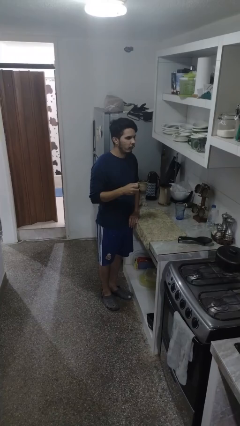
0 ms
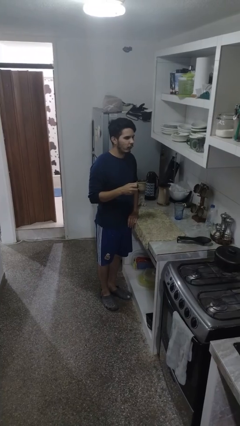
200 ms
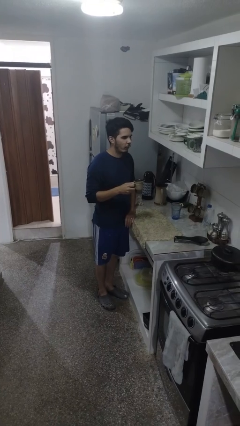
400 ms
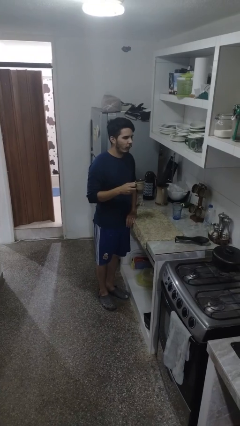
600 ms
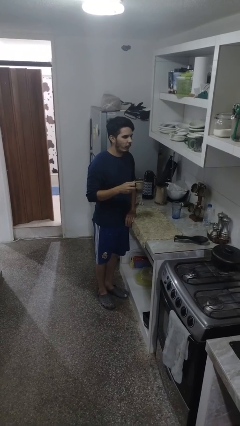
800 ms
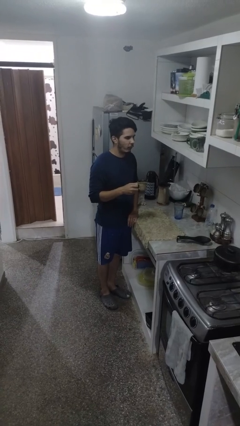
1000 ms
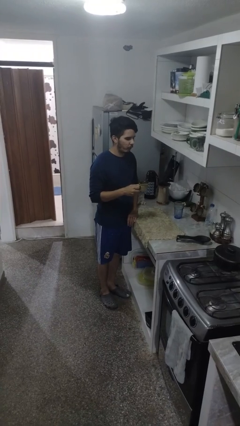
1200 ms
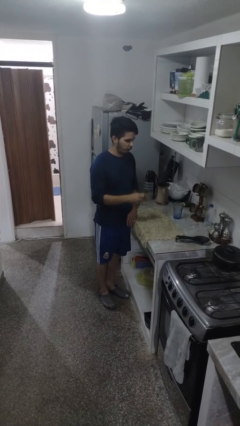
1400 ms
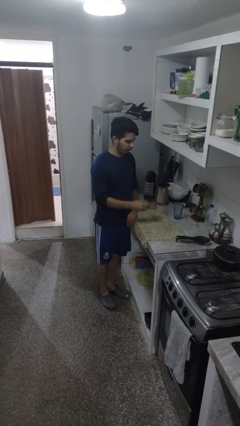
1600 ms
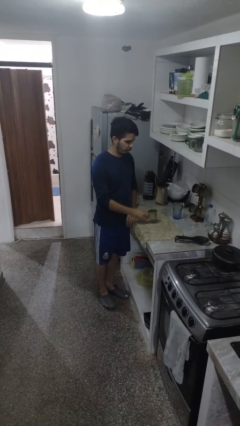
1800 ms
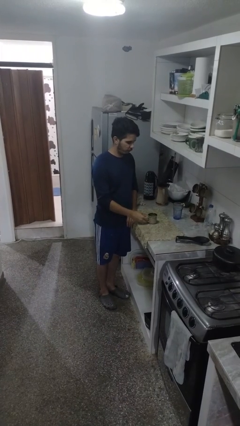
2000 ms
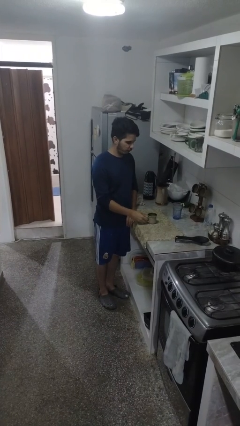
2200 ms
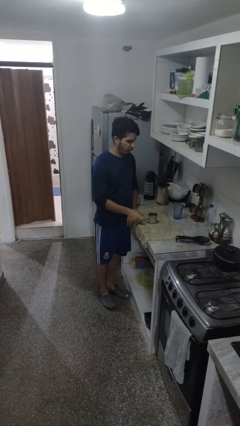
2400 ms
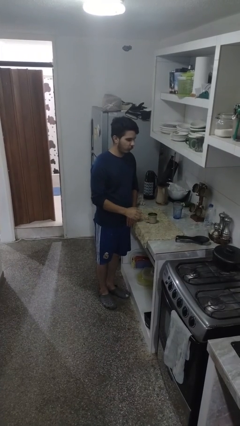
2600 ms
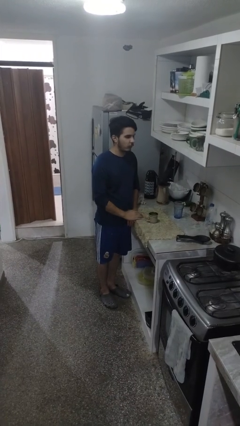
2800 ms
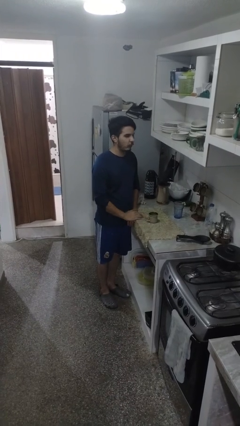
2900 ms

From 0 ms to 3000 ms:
person puts down object on table

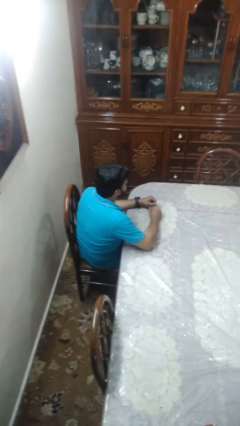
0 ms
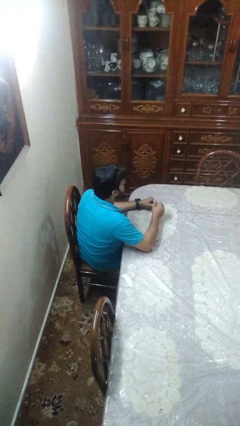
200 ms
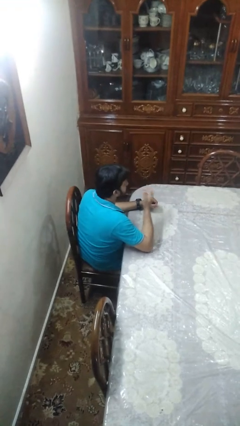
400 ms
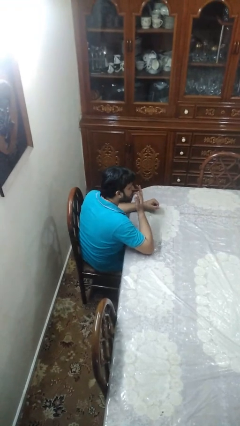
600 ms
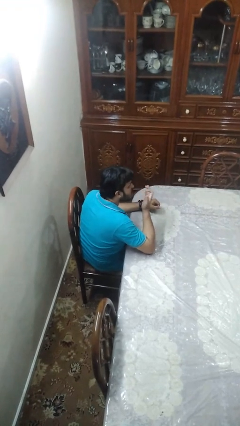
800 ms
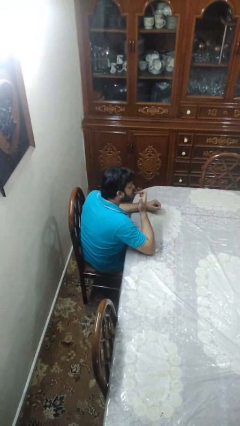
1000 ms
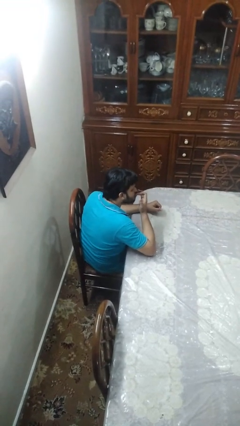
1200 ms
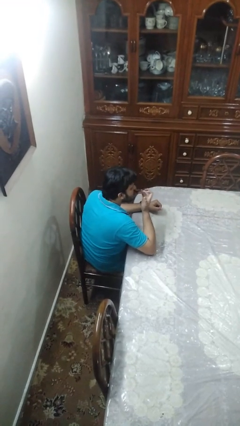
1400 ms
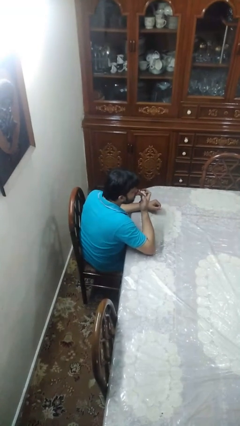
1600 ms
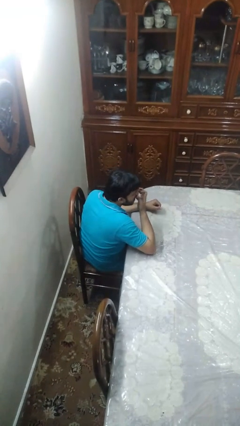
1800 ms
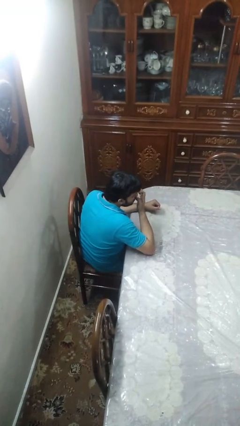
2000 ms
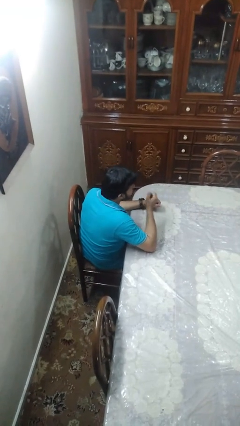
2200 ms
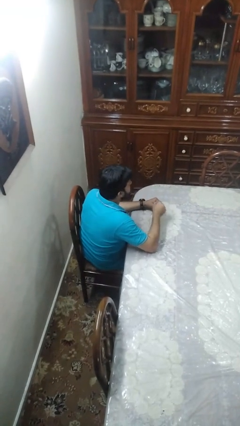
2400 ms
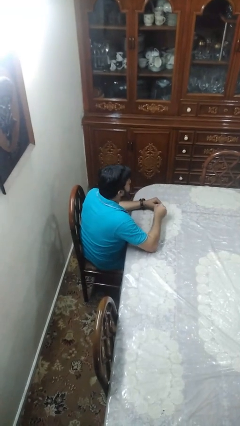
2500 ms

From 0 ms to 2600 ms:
person licks fingers

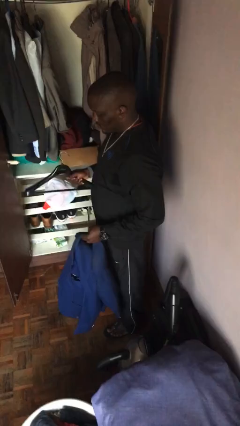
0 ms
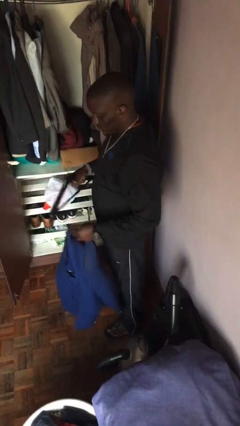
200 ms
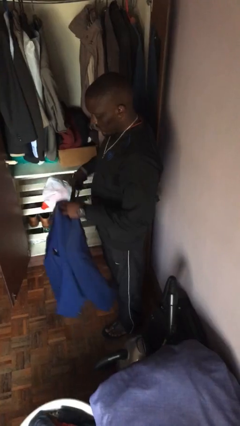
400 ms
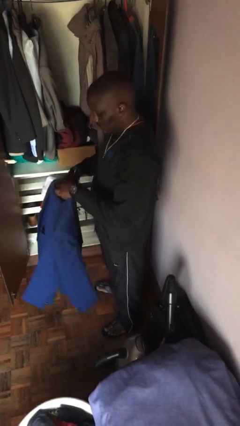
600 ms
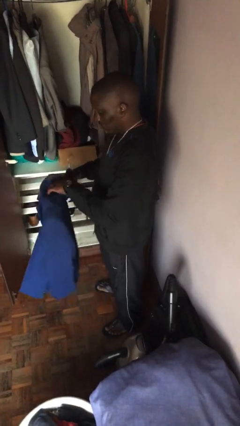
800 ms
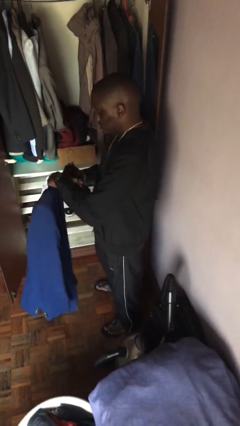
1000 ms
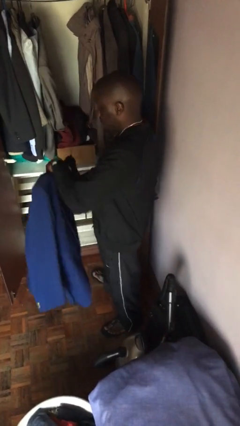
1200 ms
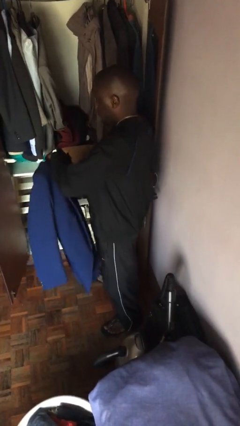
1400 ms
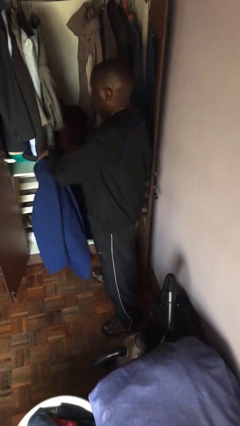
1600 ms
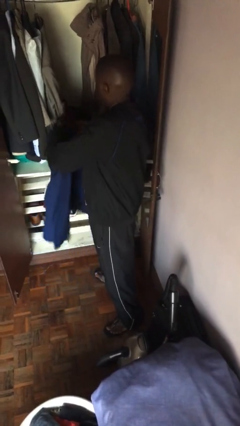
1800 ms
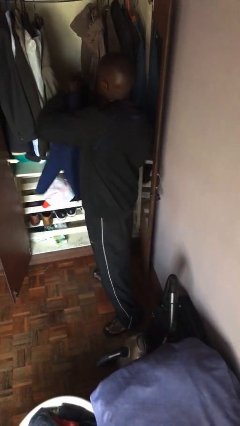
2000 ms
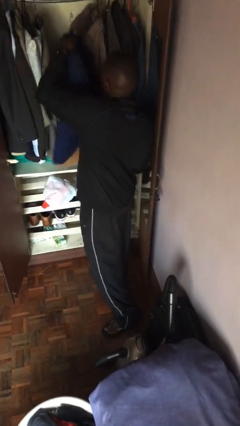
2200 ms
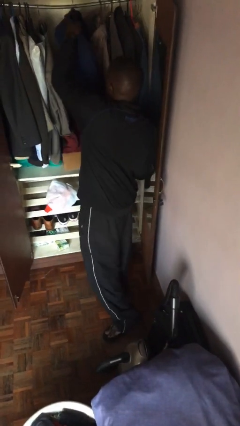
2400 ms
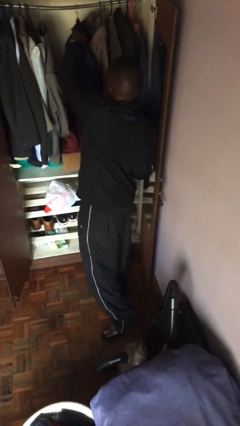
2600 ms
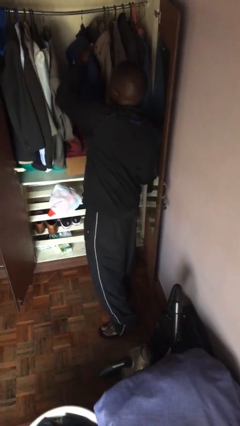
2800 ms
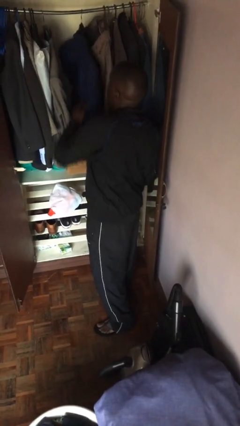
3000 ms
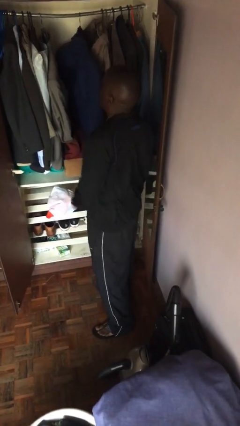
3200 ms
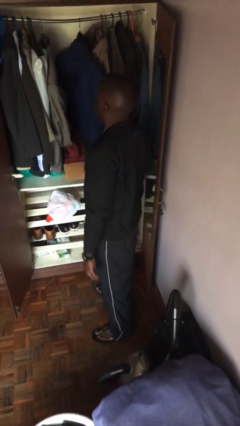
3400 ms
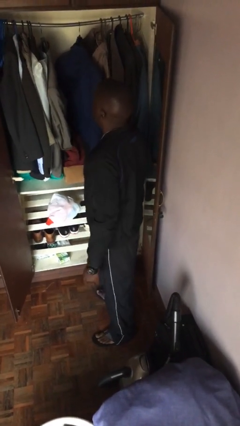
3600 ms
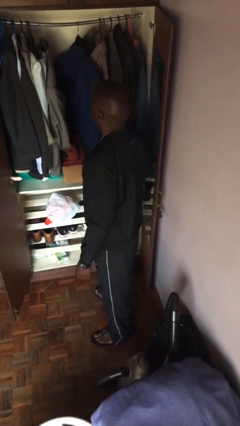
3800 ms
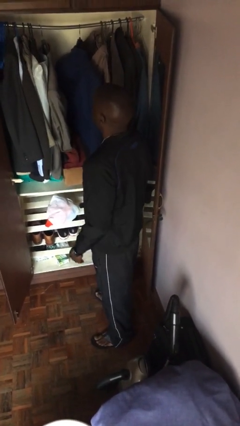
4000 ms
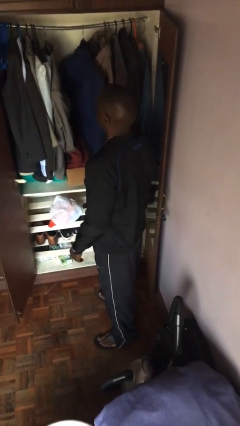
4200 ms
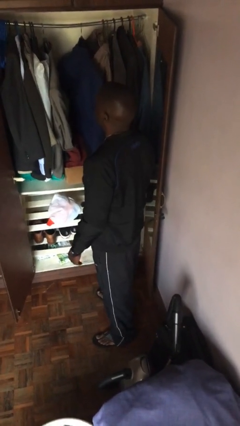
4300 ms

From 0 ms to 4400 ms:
person puts clothes into closet

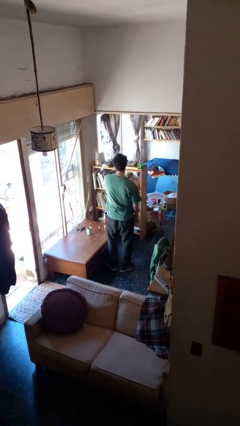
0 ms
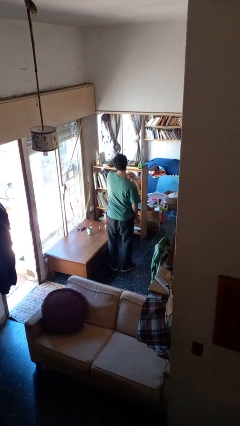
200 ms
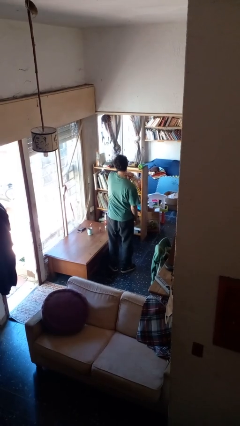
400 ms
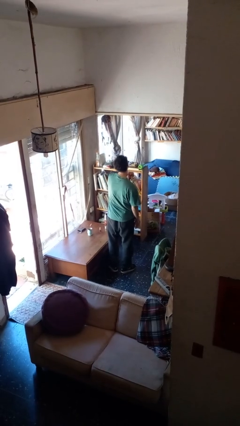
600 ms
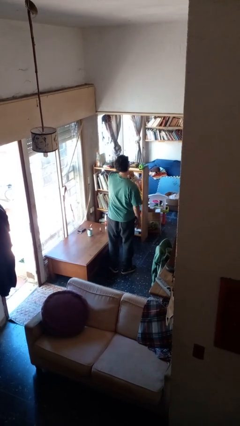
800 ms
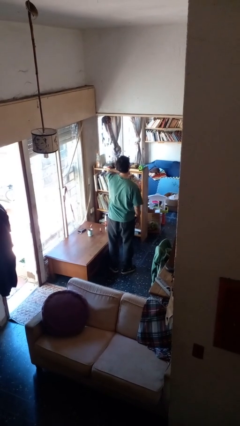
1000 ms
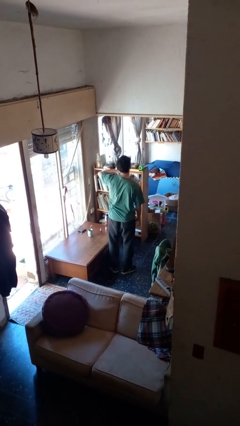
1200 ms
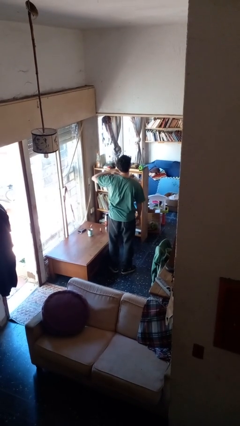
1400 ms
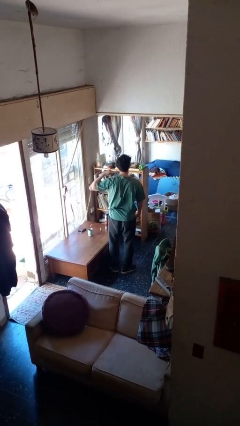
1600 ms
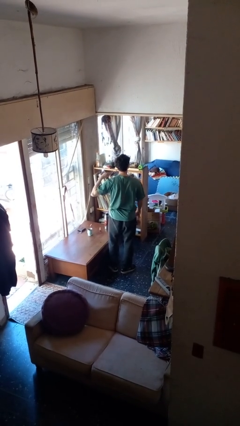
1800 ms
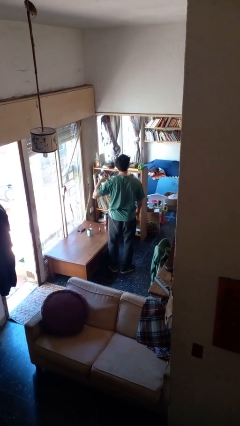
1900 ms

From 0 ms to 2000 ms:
person gestures cut

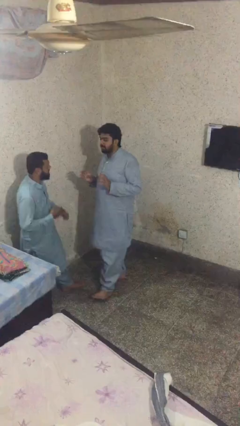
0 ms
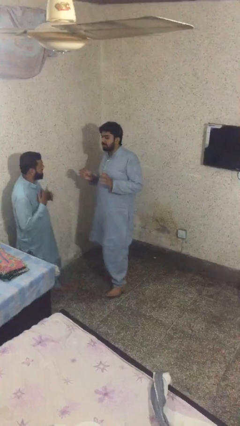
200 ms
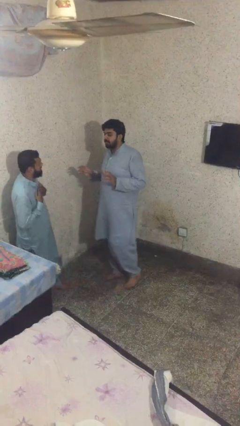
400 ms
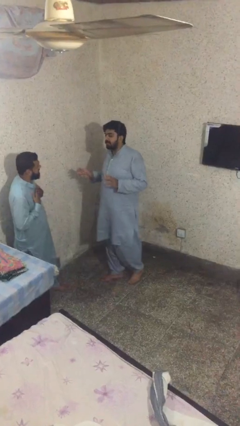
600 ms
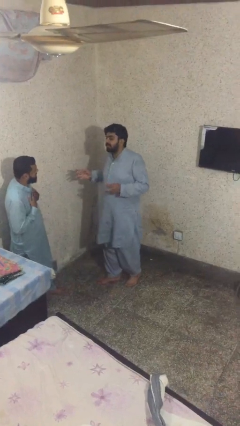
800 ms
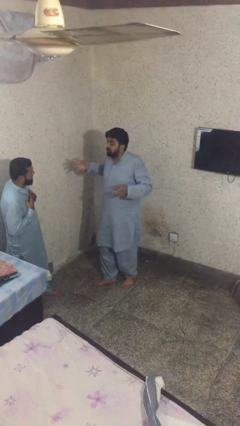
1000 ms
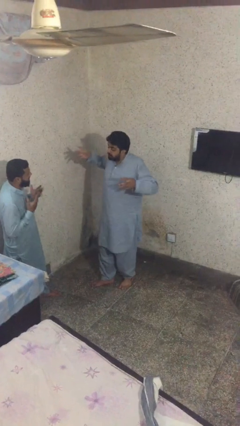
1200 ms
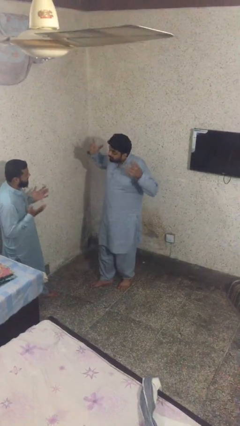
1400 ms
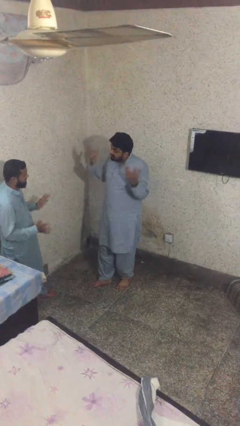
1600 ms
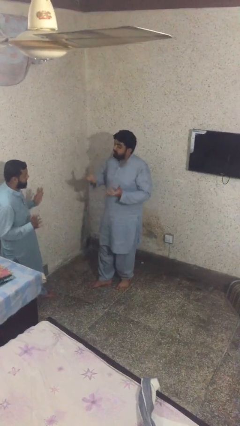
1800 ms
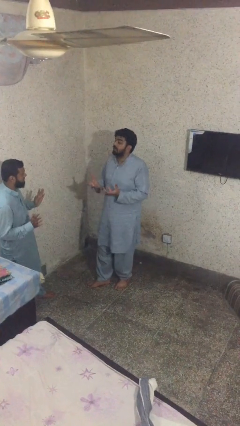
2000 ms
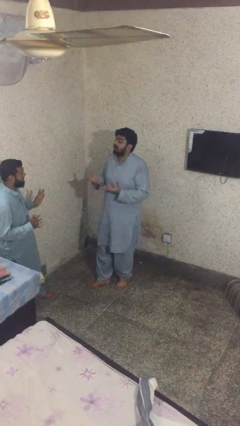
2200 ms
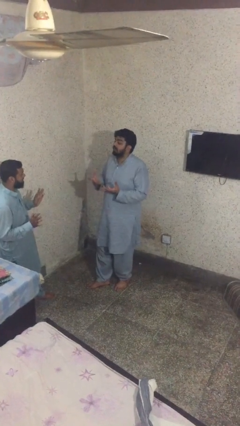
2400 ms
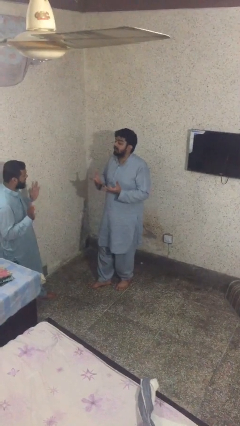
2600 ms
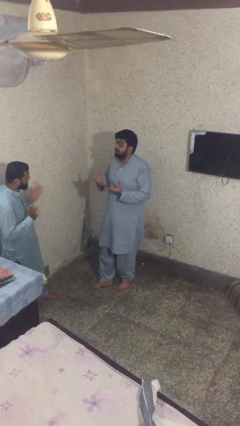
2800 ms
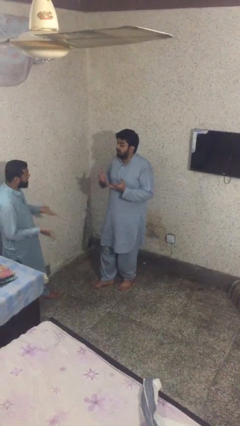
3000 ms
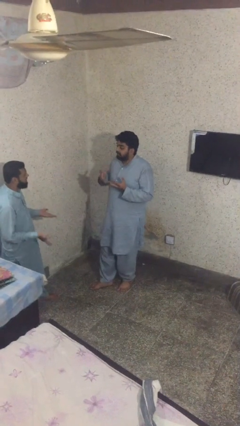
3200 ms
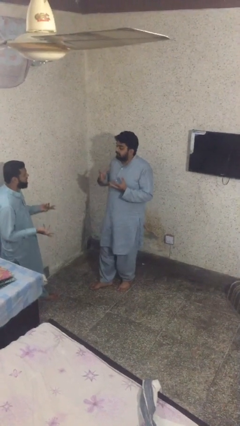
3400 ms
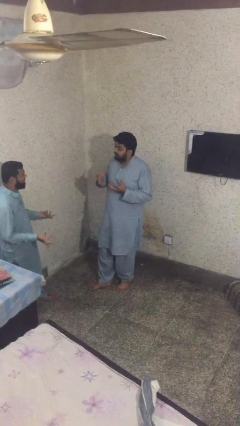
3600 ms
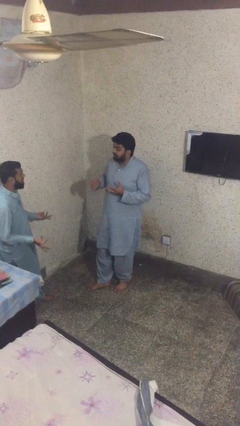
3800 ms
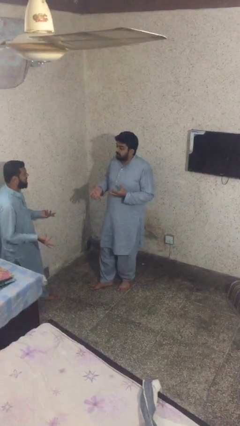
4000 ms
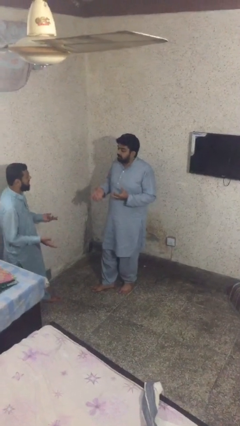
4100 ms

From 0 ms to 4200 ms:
person talks to person

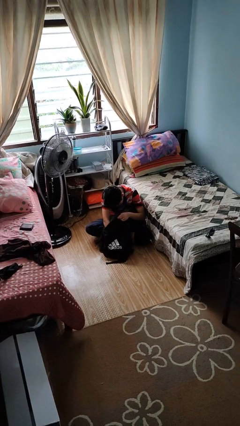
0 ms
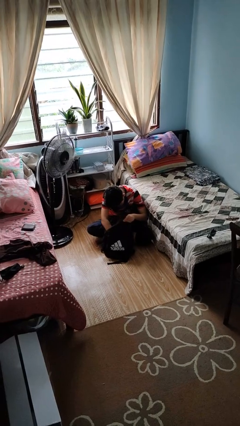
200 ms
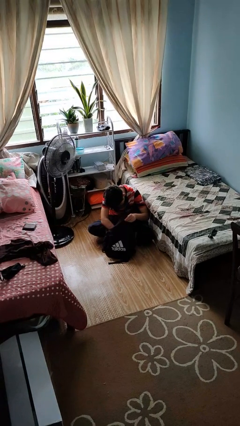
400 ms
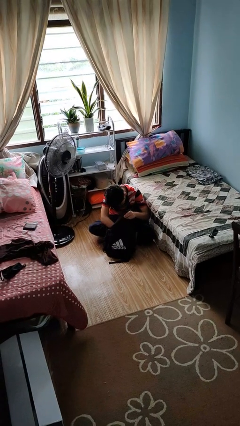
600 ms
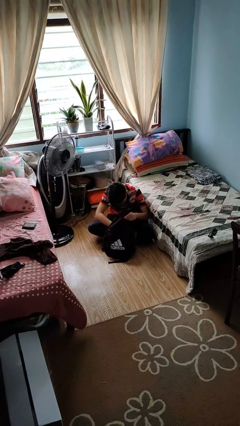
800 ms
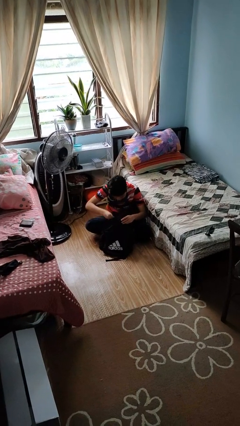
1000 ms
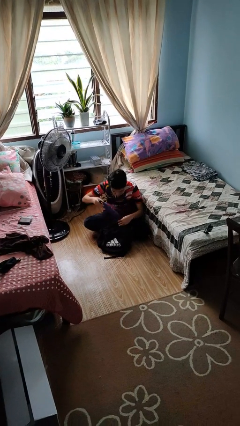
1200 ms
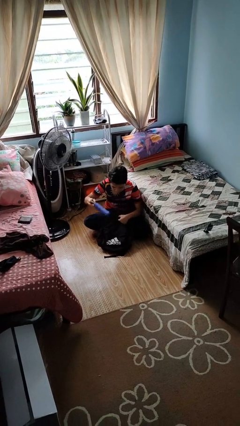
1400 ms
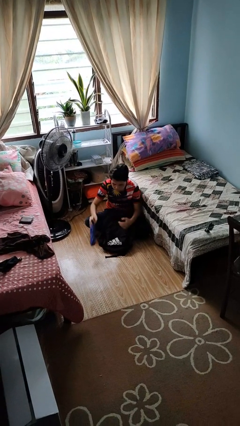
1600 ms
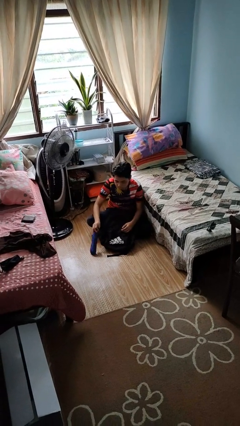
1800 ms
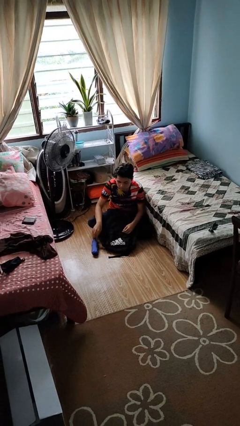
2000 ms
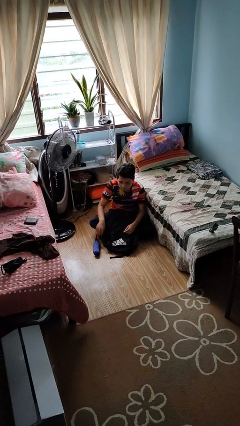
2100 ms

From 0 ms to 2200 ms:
person takes object from backpack
